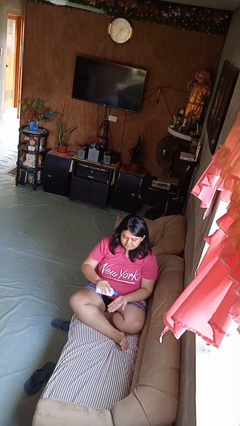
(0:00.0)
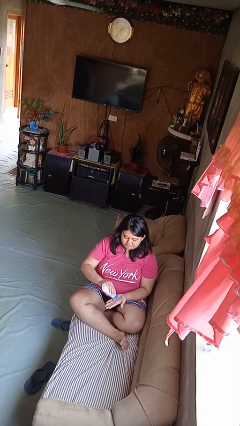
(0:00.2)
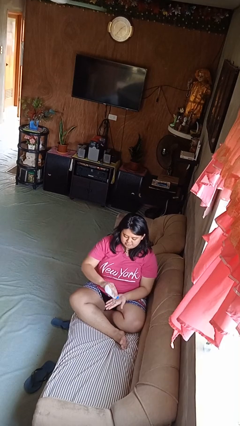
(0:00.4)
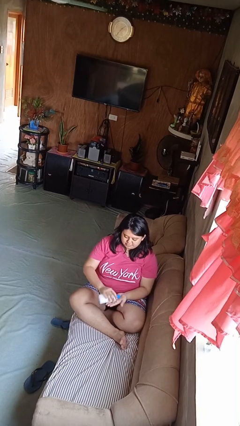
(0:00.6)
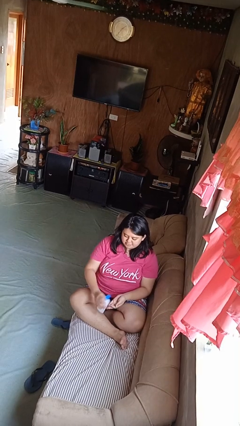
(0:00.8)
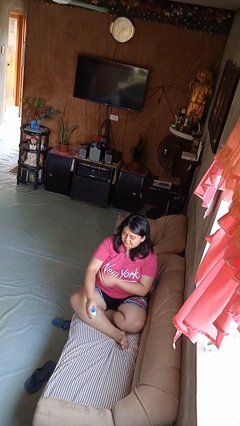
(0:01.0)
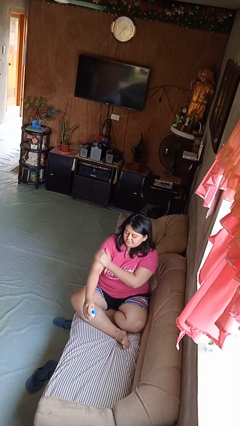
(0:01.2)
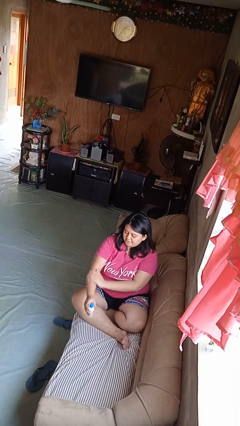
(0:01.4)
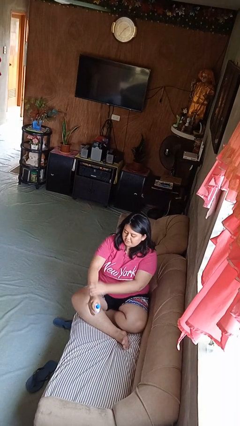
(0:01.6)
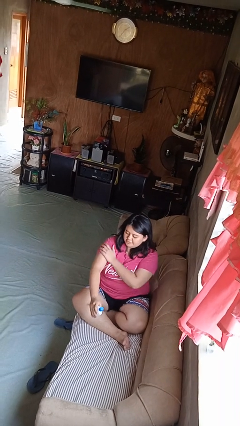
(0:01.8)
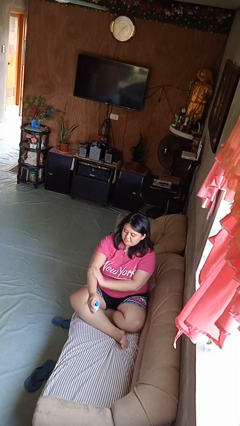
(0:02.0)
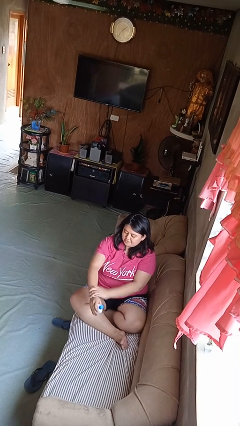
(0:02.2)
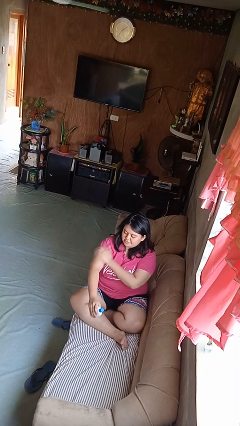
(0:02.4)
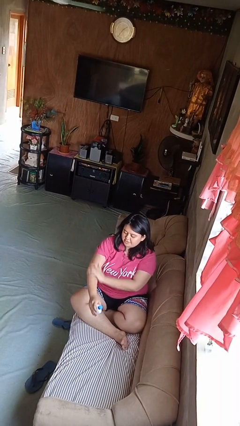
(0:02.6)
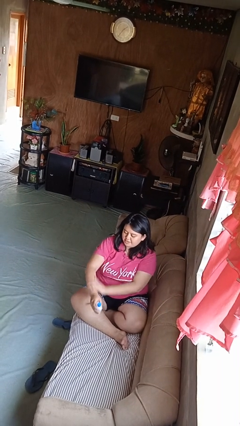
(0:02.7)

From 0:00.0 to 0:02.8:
person applies sunscreen

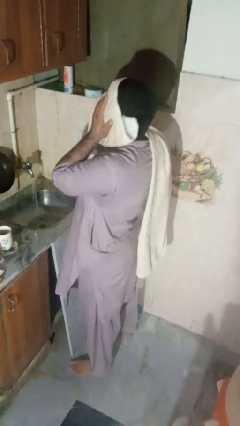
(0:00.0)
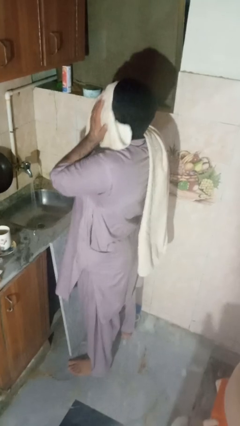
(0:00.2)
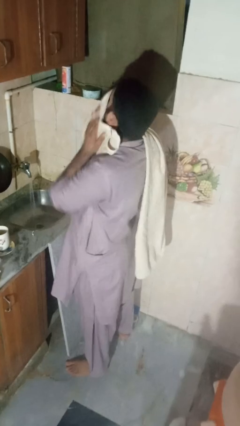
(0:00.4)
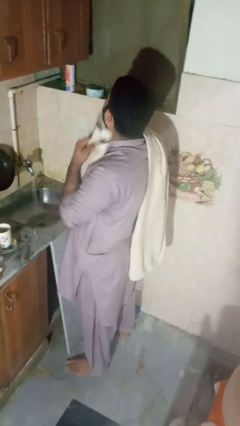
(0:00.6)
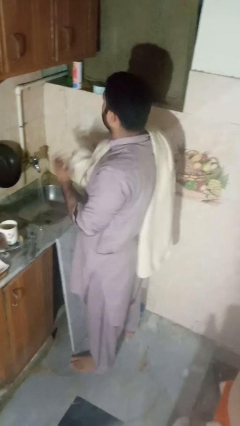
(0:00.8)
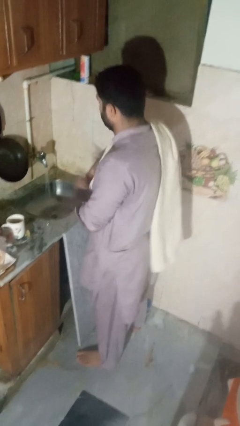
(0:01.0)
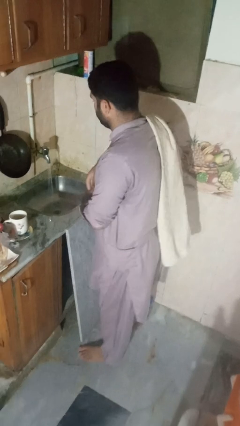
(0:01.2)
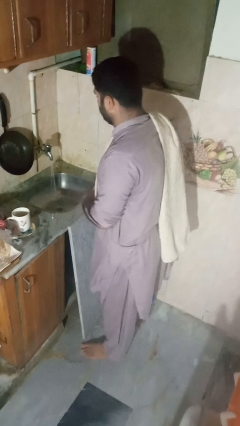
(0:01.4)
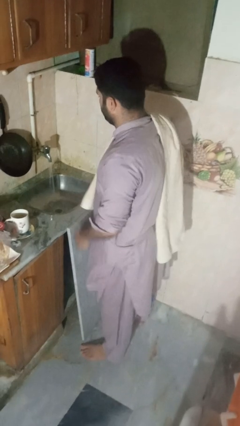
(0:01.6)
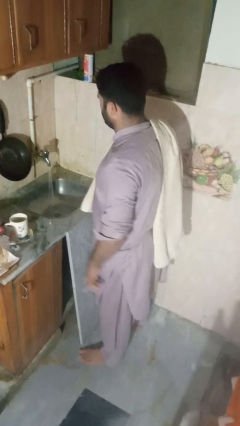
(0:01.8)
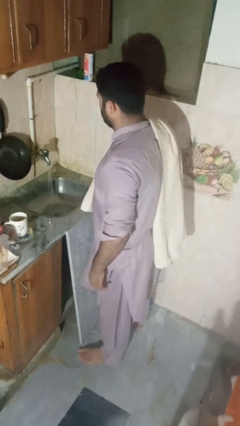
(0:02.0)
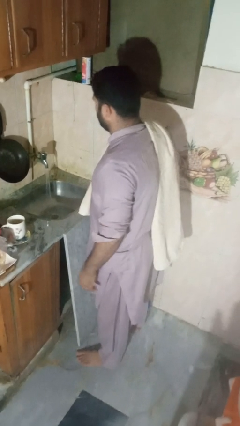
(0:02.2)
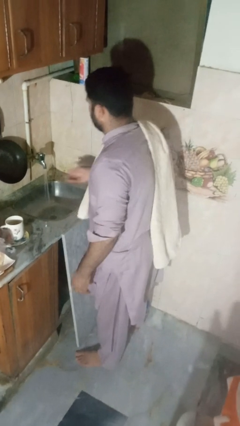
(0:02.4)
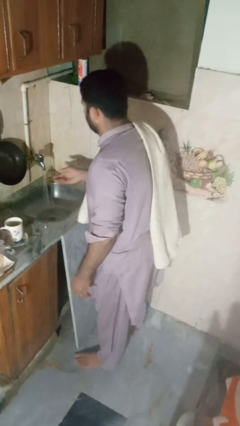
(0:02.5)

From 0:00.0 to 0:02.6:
person dries face with towel

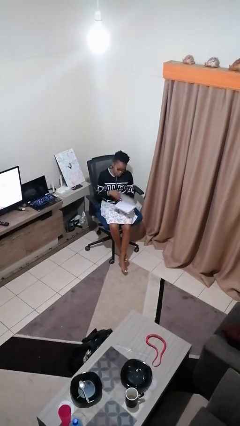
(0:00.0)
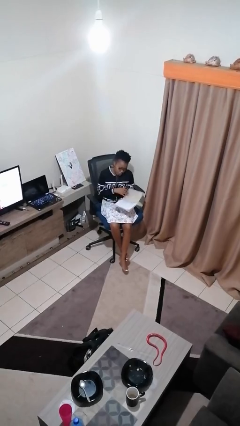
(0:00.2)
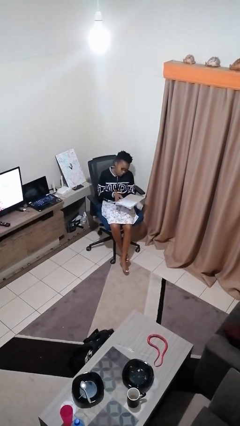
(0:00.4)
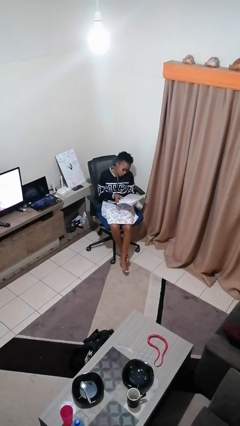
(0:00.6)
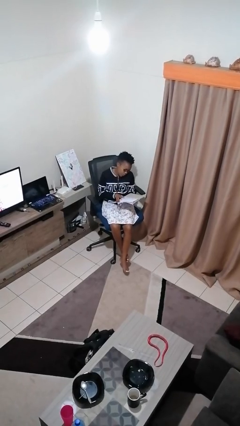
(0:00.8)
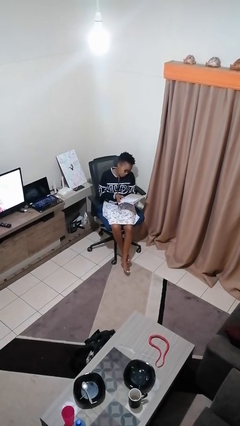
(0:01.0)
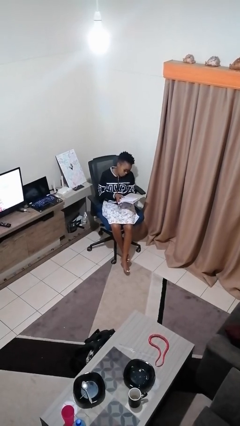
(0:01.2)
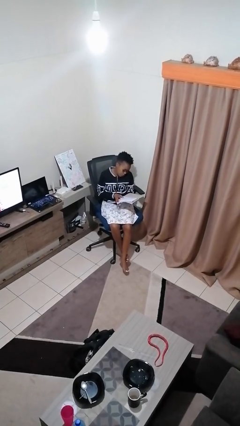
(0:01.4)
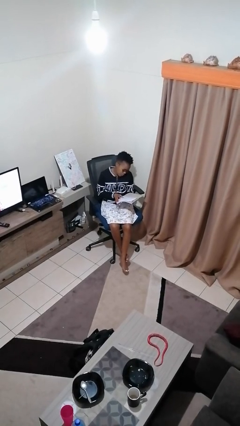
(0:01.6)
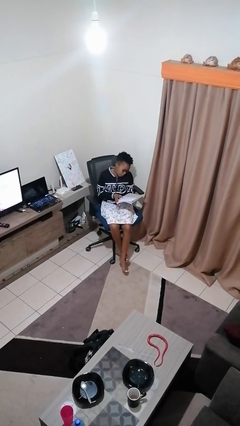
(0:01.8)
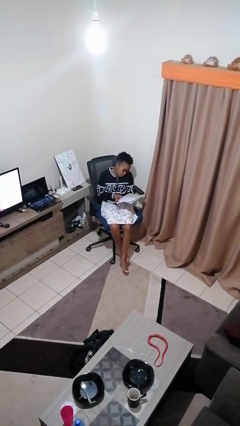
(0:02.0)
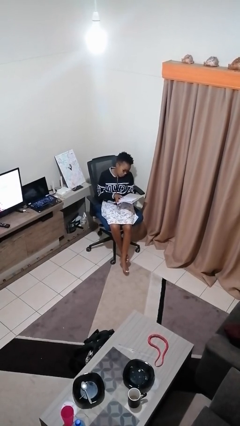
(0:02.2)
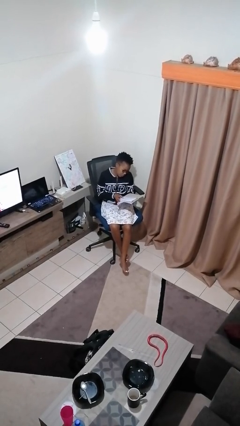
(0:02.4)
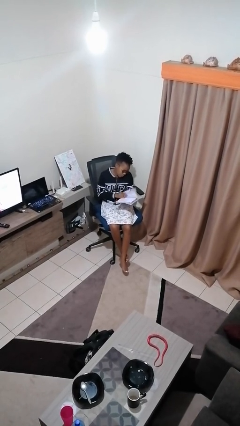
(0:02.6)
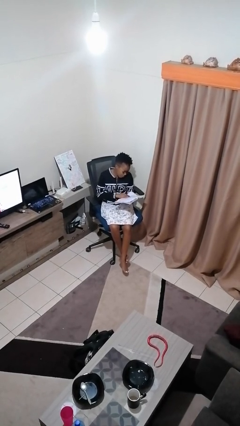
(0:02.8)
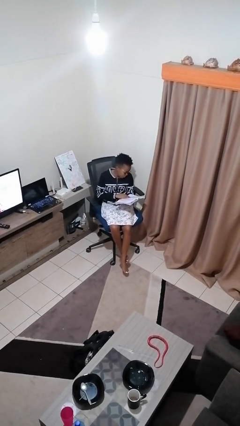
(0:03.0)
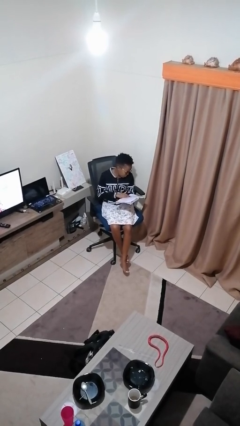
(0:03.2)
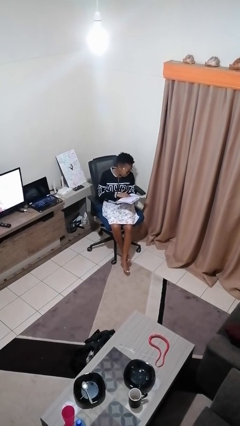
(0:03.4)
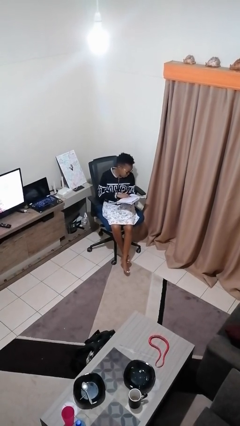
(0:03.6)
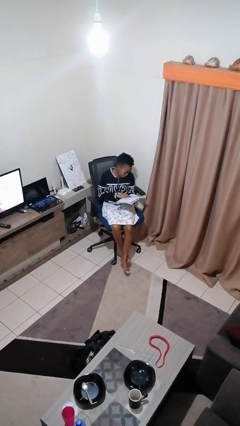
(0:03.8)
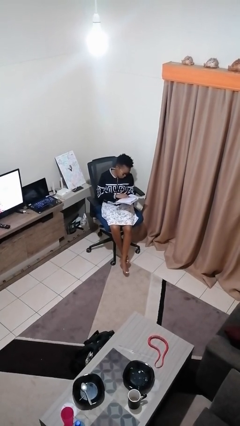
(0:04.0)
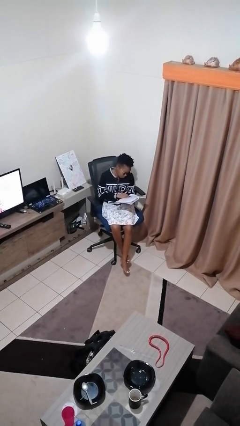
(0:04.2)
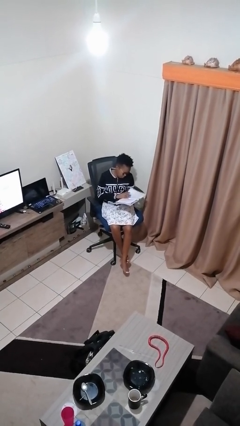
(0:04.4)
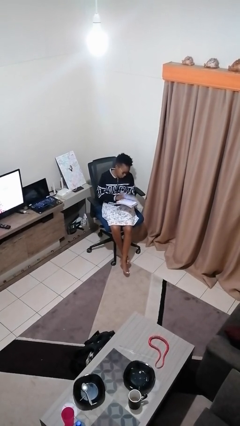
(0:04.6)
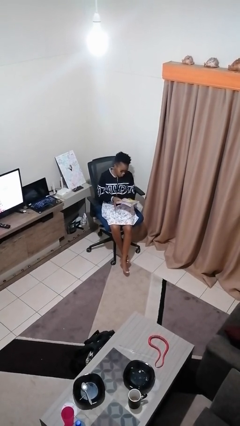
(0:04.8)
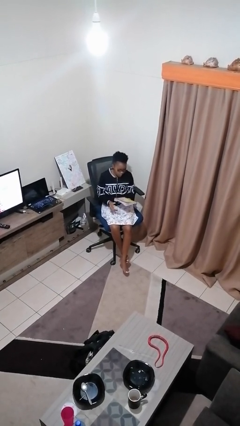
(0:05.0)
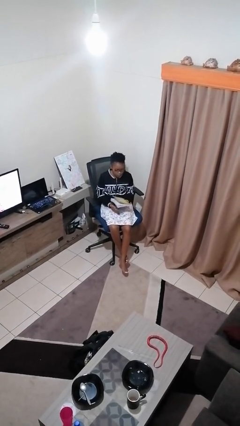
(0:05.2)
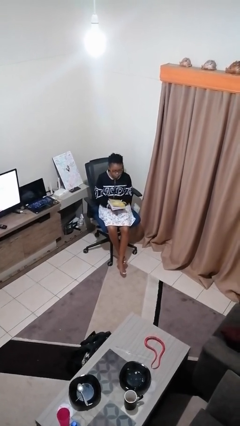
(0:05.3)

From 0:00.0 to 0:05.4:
person reads book

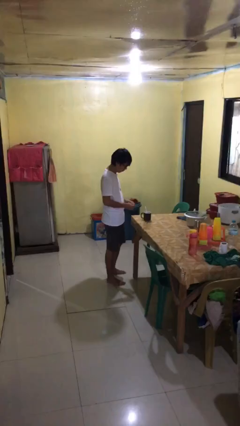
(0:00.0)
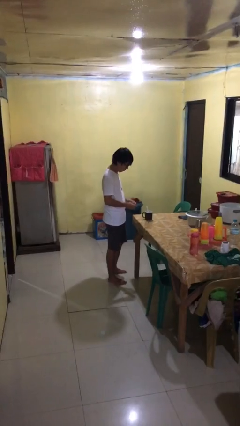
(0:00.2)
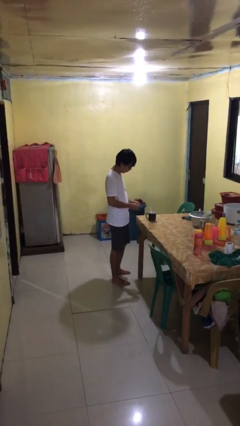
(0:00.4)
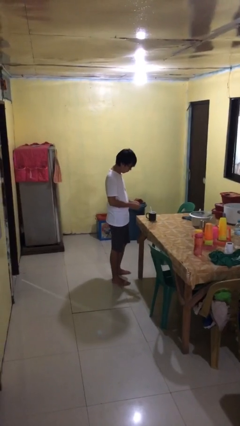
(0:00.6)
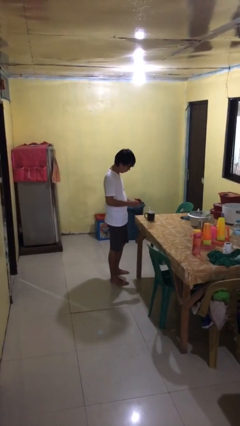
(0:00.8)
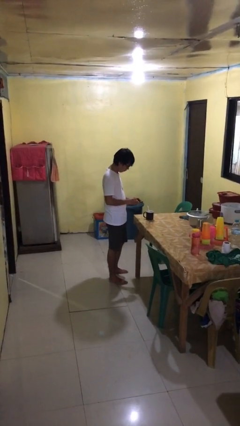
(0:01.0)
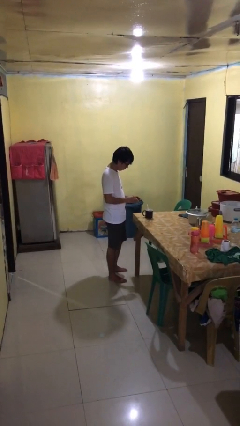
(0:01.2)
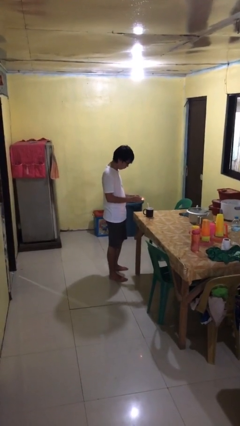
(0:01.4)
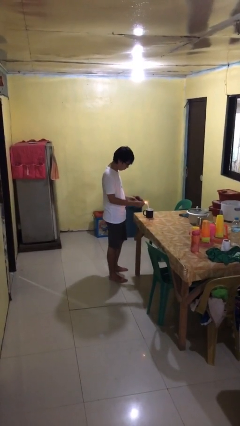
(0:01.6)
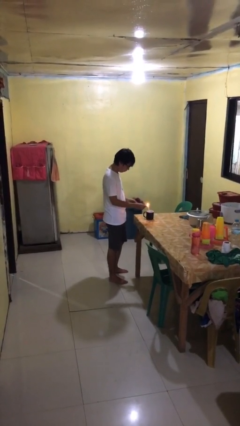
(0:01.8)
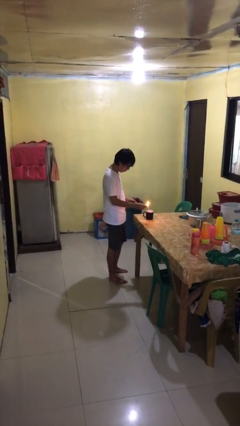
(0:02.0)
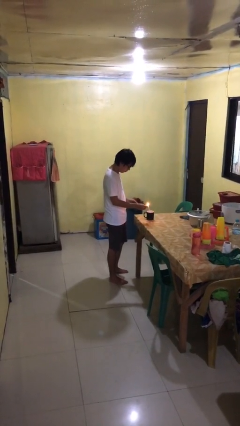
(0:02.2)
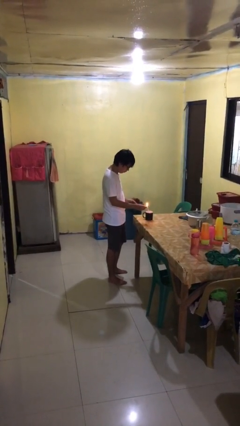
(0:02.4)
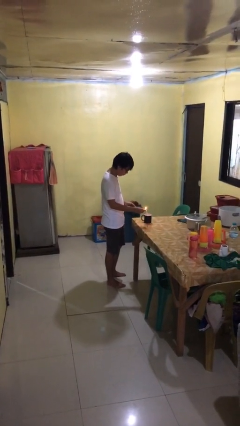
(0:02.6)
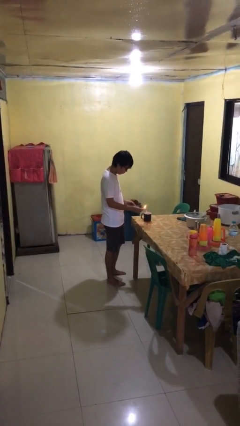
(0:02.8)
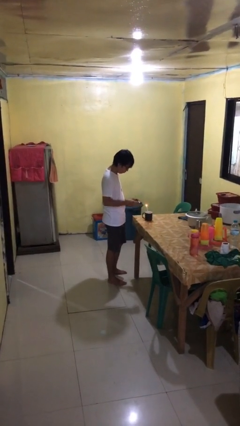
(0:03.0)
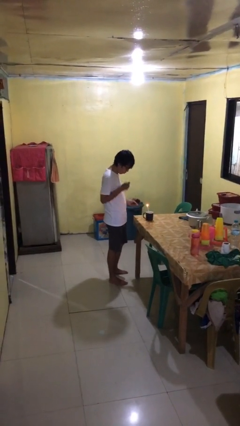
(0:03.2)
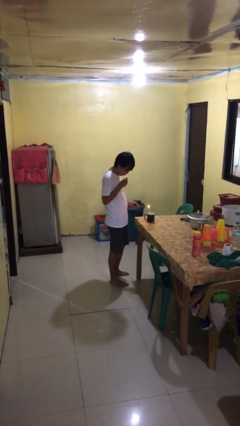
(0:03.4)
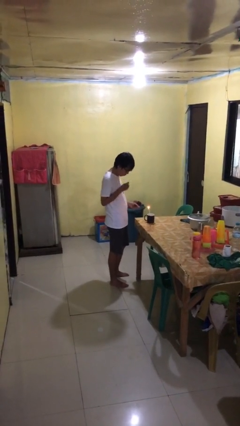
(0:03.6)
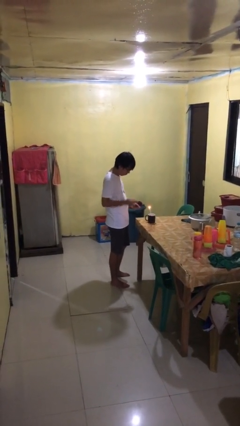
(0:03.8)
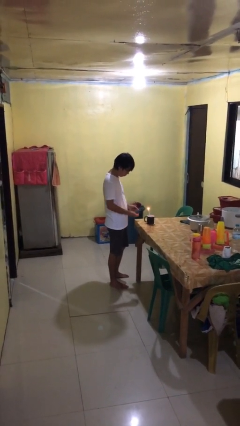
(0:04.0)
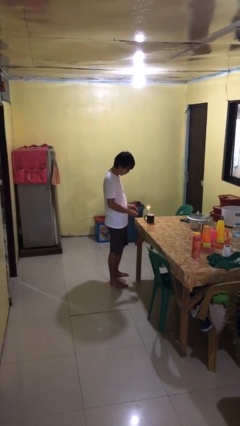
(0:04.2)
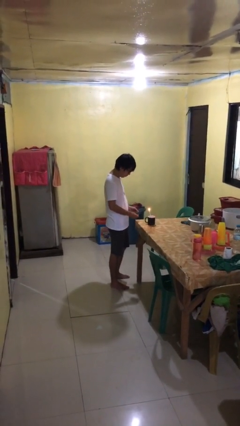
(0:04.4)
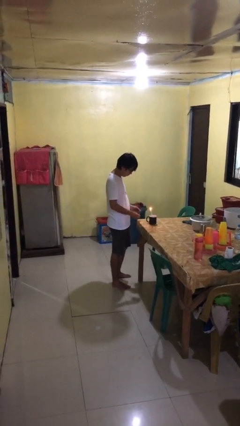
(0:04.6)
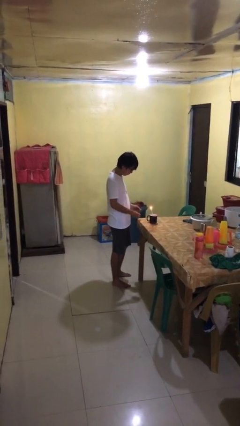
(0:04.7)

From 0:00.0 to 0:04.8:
person lights candle

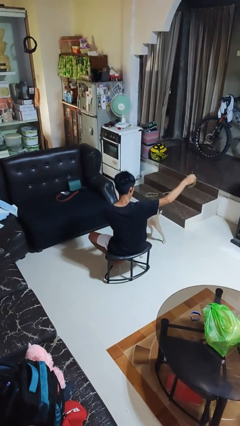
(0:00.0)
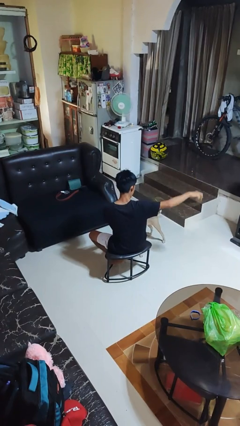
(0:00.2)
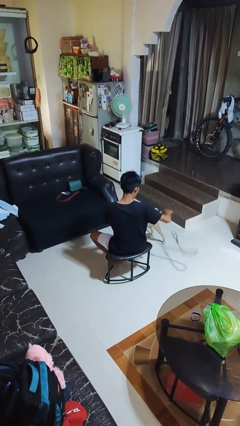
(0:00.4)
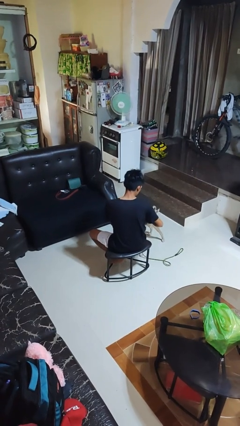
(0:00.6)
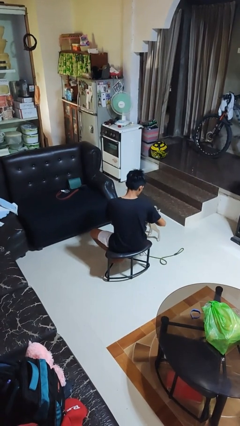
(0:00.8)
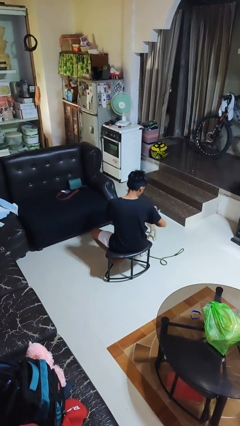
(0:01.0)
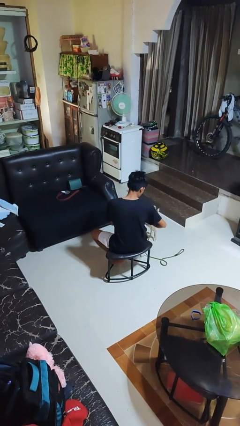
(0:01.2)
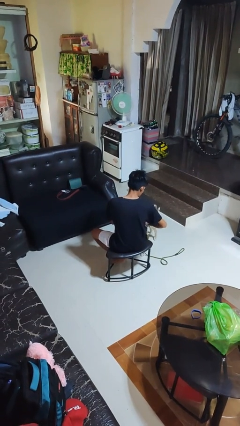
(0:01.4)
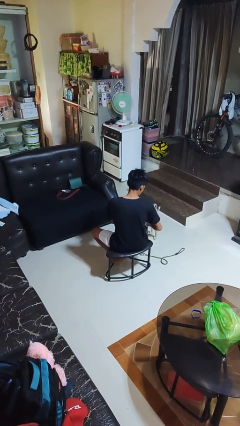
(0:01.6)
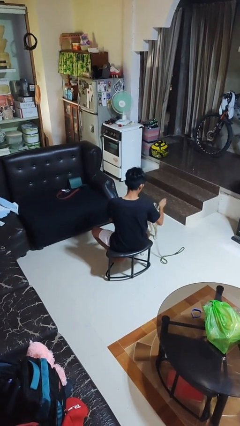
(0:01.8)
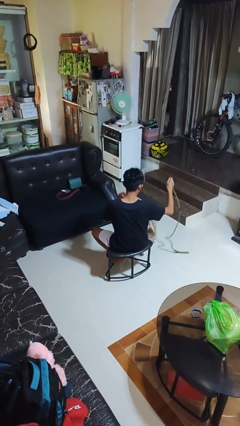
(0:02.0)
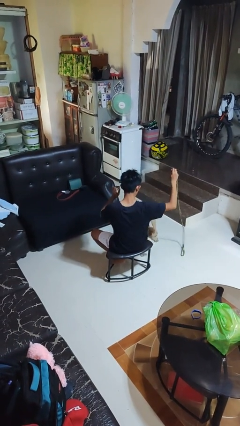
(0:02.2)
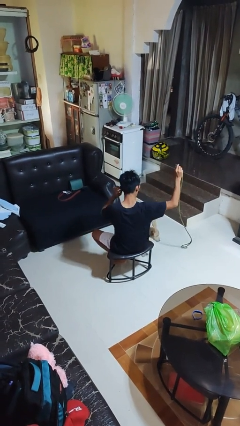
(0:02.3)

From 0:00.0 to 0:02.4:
person unattaches leash from dog
